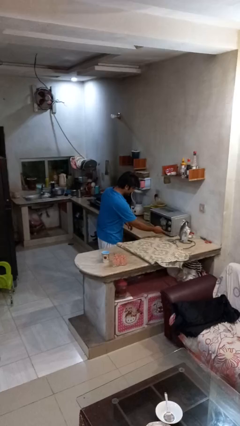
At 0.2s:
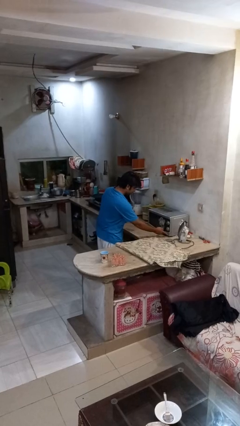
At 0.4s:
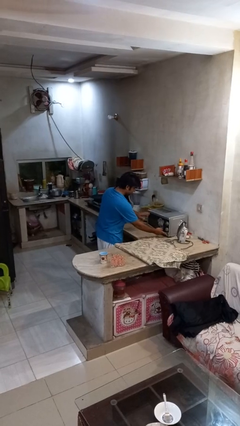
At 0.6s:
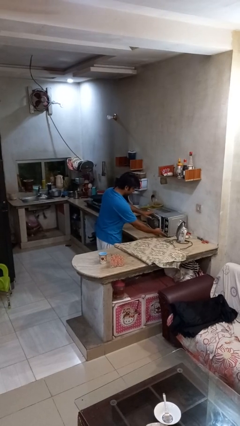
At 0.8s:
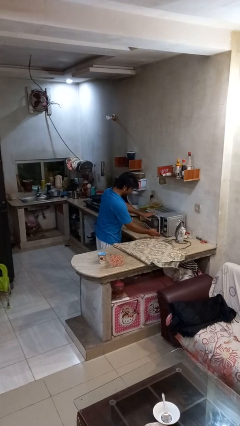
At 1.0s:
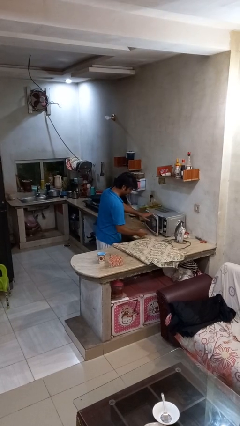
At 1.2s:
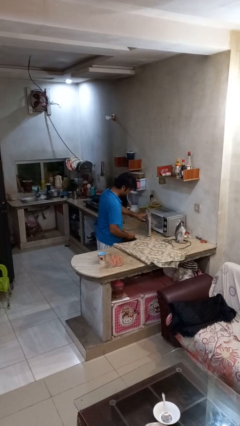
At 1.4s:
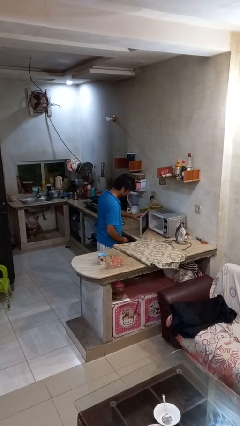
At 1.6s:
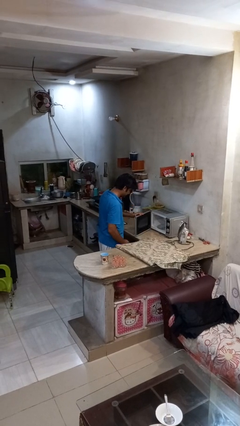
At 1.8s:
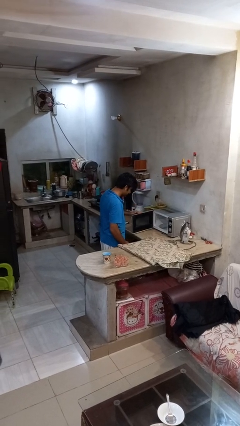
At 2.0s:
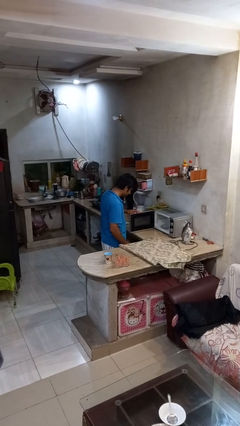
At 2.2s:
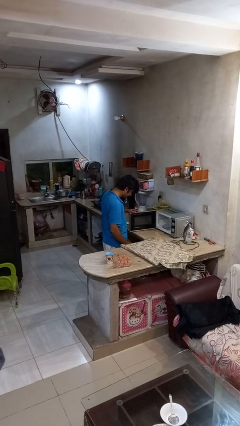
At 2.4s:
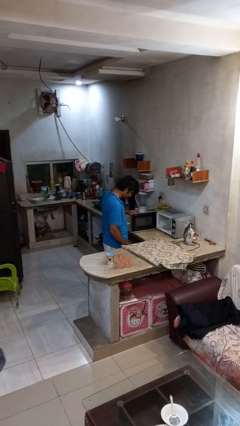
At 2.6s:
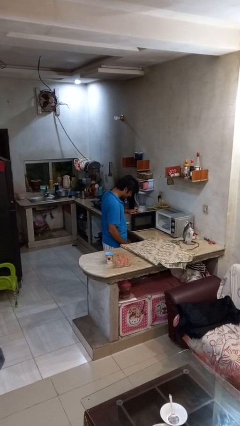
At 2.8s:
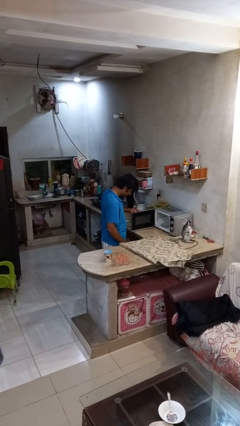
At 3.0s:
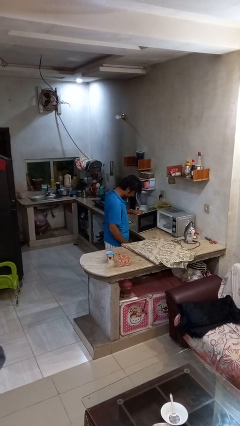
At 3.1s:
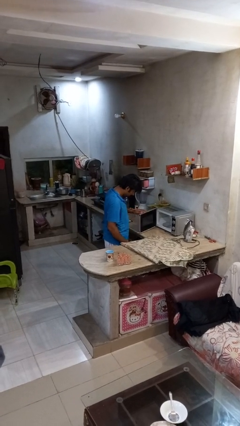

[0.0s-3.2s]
person opens microwave

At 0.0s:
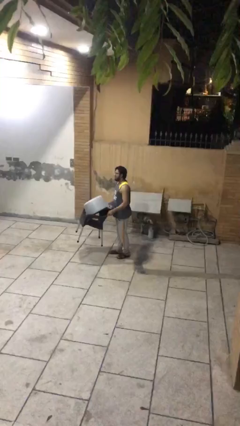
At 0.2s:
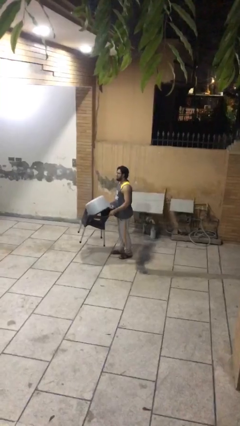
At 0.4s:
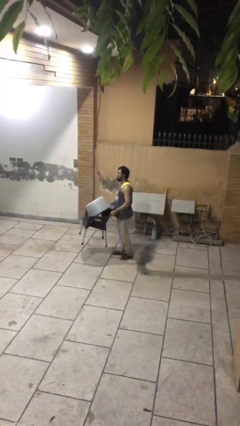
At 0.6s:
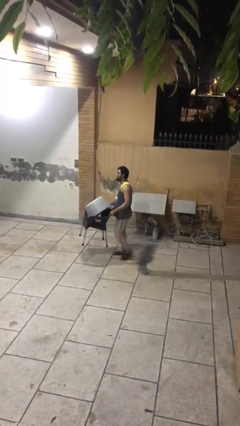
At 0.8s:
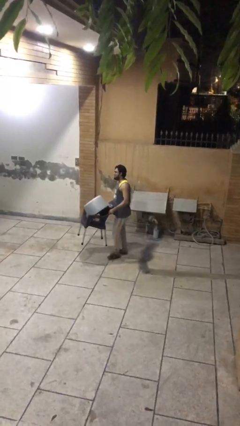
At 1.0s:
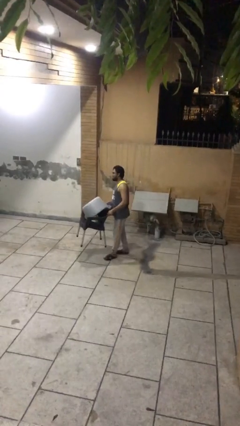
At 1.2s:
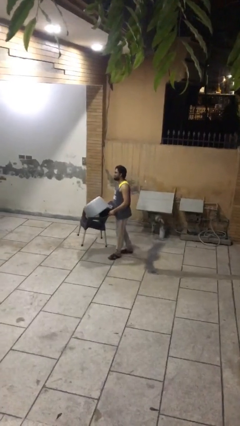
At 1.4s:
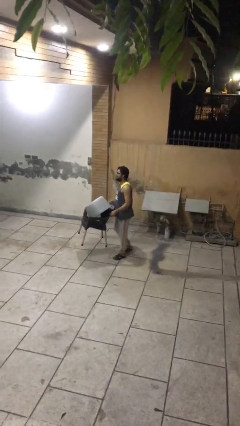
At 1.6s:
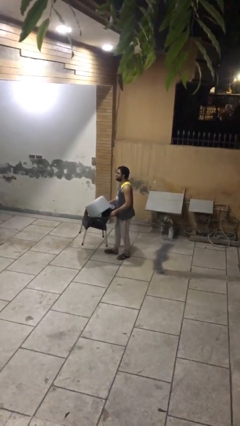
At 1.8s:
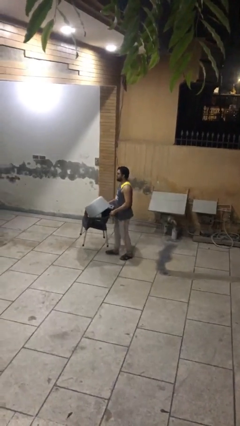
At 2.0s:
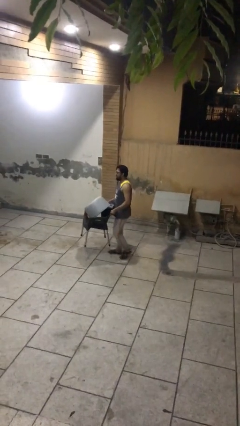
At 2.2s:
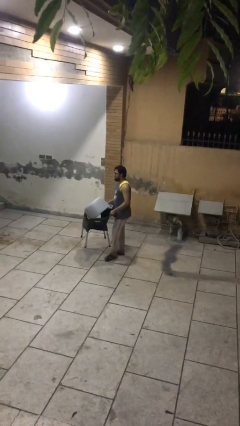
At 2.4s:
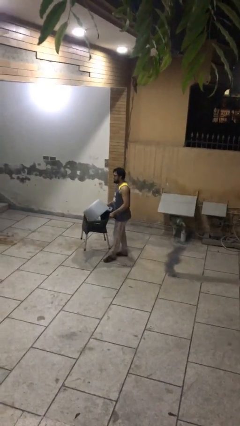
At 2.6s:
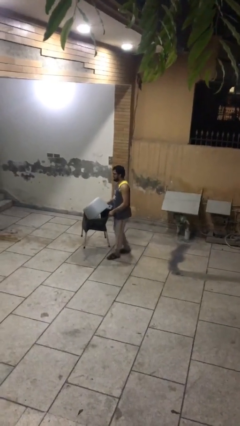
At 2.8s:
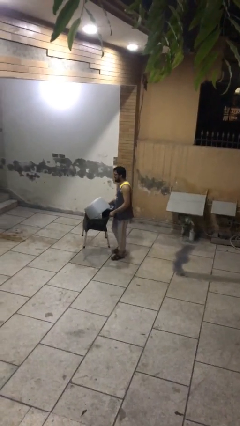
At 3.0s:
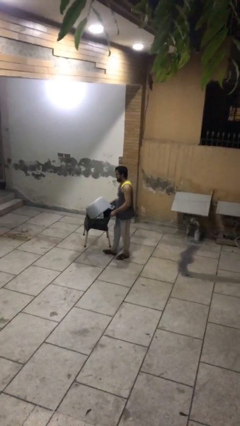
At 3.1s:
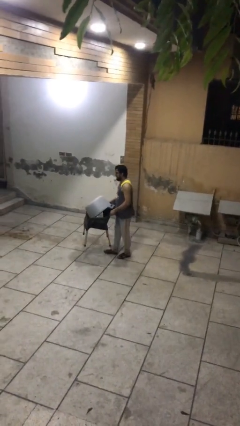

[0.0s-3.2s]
person carries heavy object

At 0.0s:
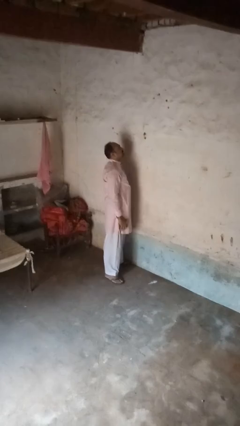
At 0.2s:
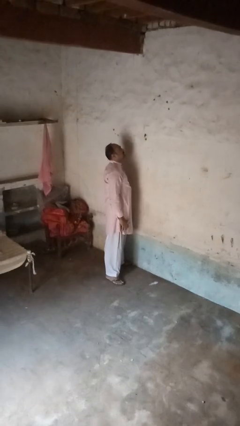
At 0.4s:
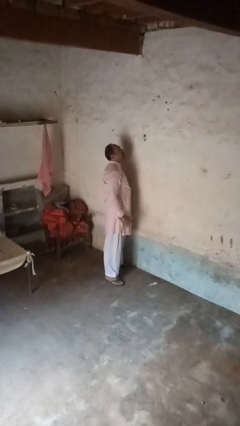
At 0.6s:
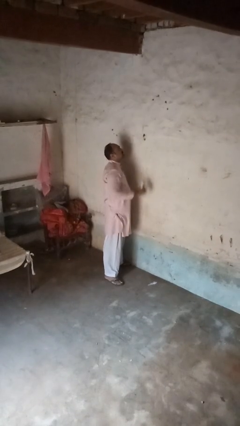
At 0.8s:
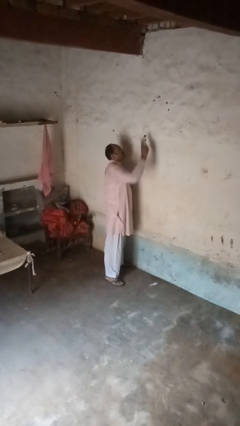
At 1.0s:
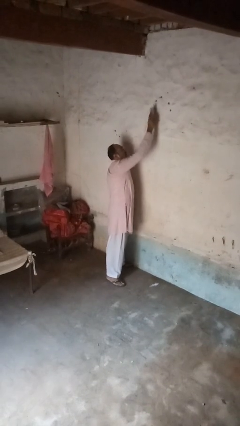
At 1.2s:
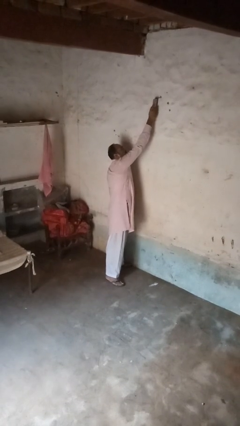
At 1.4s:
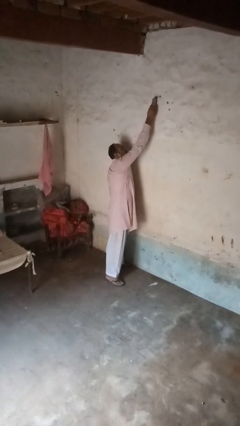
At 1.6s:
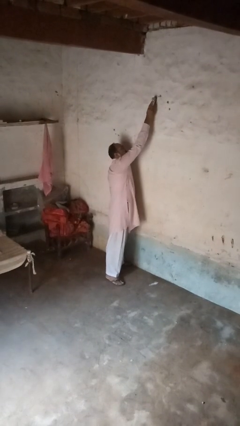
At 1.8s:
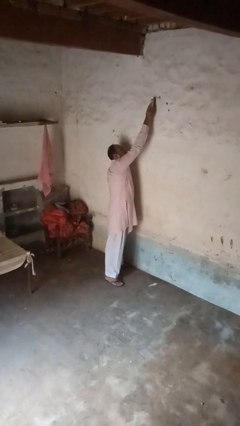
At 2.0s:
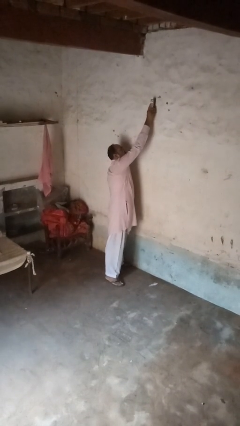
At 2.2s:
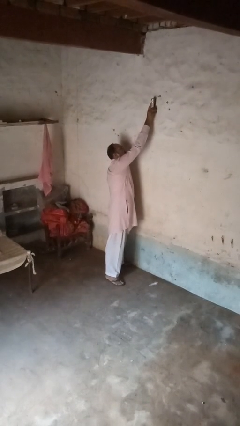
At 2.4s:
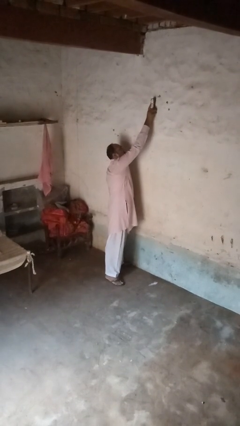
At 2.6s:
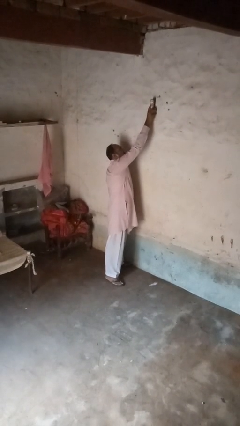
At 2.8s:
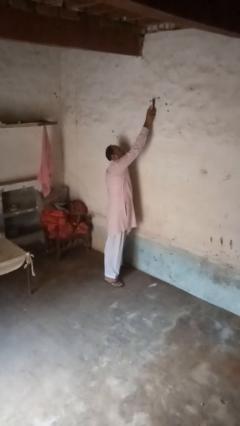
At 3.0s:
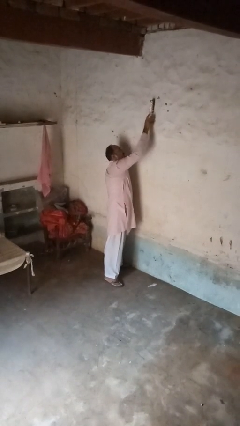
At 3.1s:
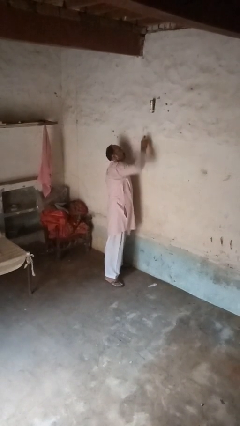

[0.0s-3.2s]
person adjusts thermostat

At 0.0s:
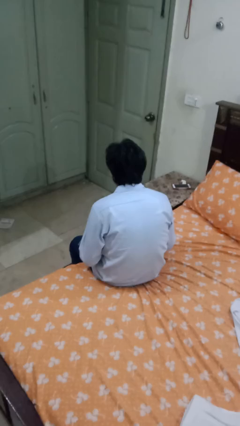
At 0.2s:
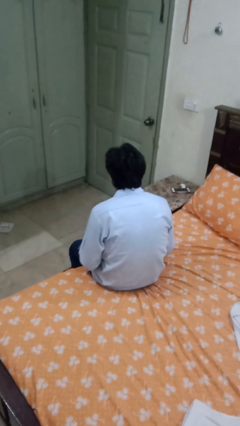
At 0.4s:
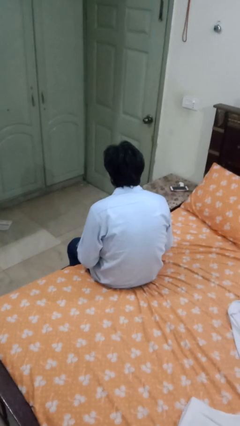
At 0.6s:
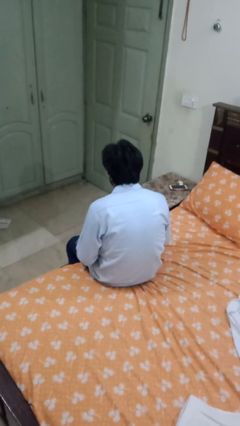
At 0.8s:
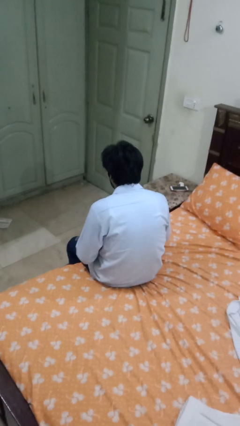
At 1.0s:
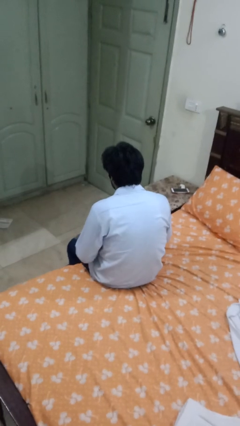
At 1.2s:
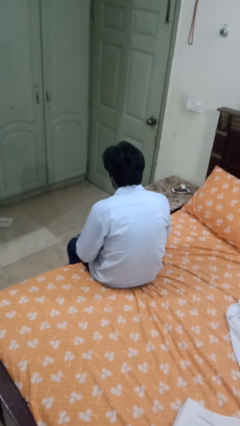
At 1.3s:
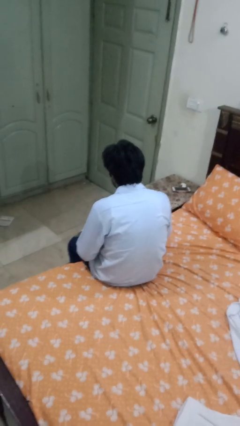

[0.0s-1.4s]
person stirs mug

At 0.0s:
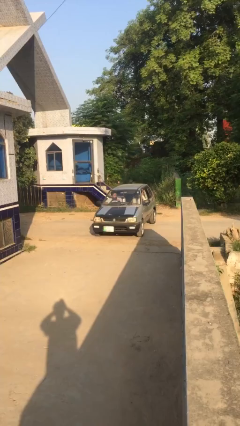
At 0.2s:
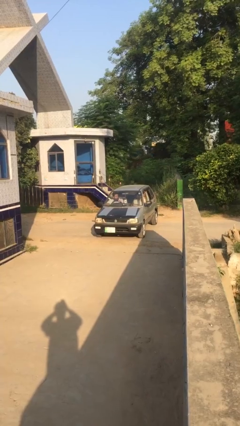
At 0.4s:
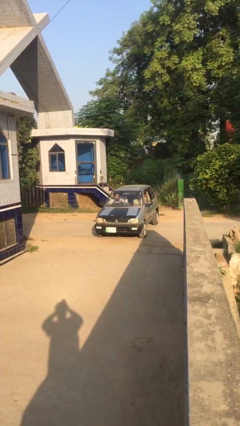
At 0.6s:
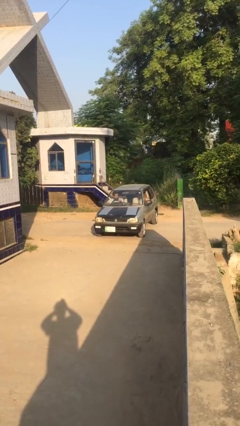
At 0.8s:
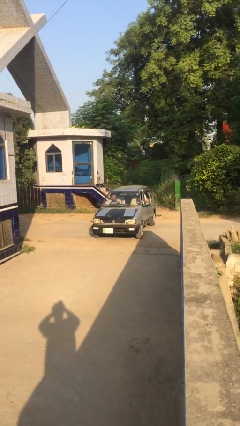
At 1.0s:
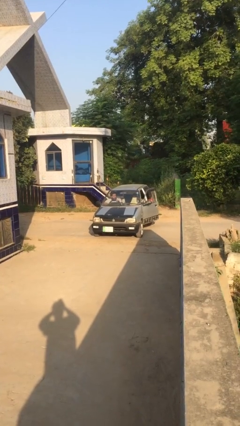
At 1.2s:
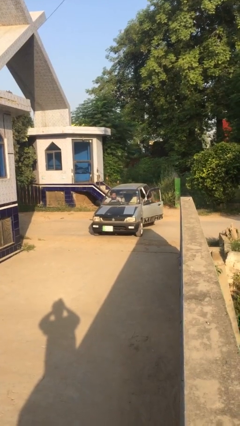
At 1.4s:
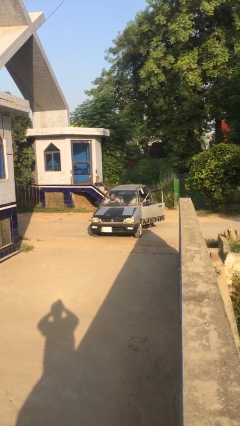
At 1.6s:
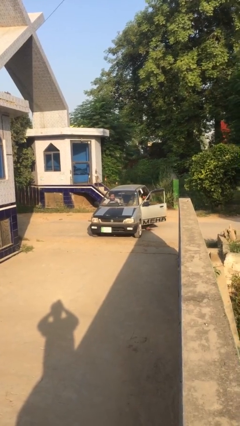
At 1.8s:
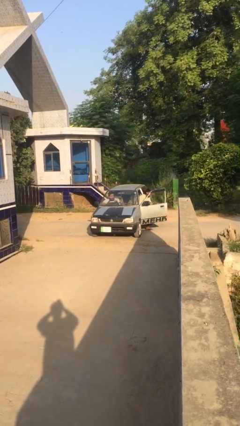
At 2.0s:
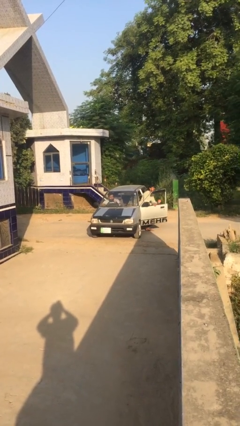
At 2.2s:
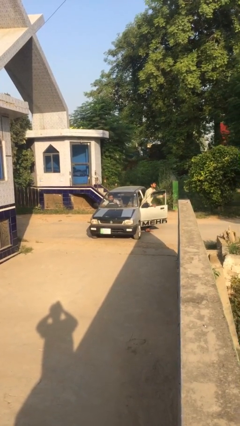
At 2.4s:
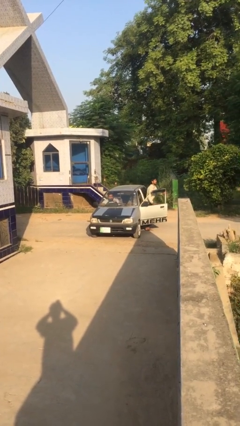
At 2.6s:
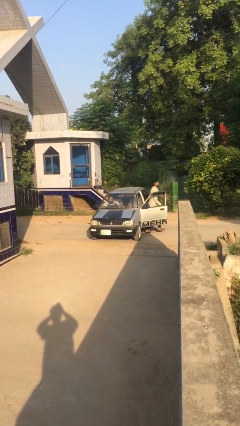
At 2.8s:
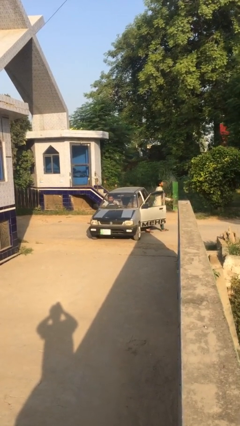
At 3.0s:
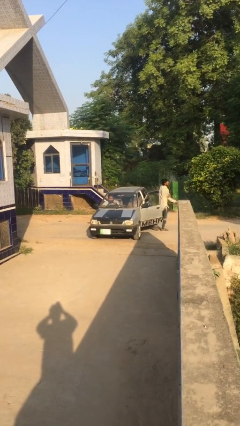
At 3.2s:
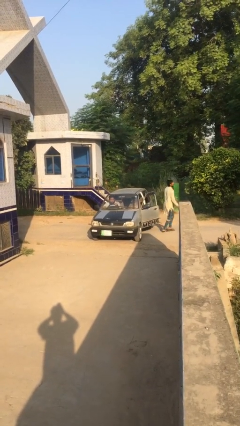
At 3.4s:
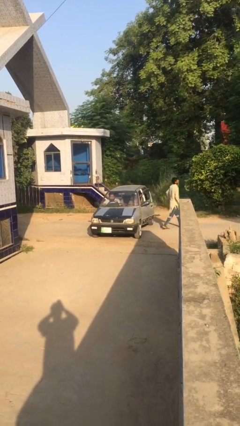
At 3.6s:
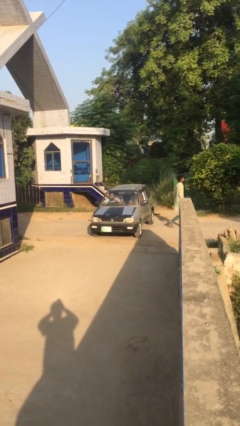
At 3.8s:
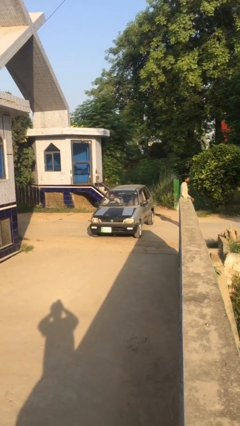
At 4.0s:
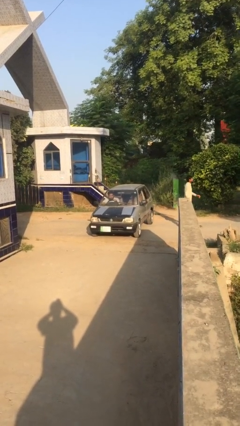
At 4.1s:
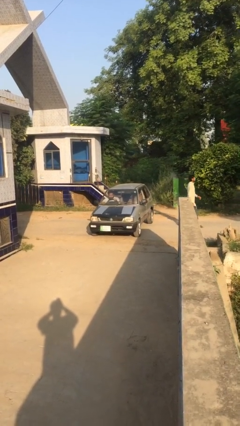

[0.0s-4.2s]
car drops off person

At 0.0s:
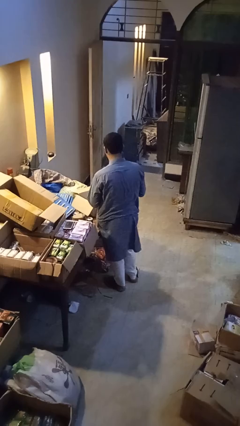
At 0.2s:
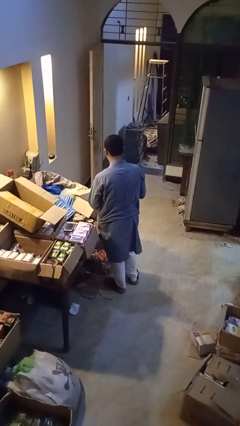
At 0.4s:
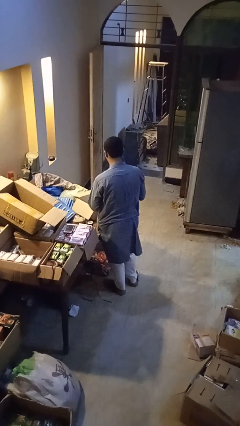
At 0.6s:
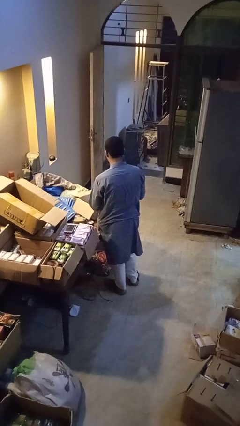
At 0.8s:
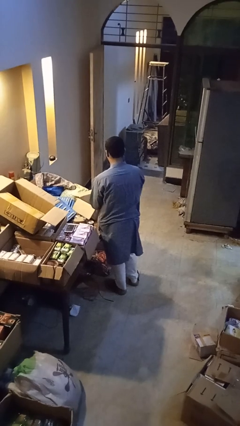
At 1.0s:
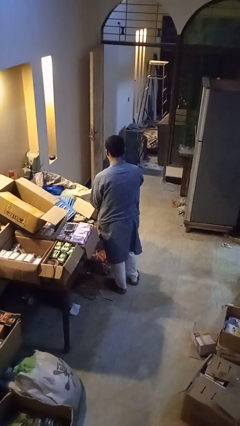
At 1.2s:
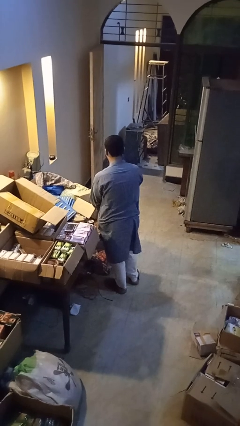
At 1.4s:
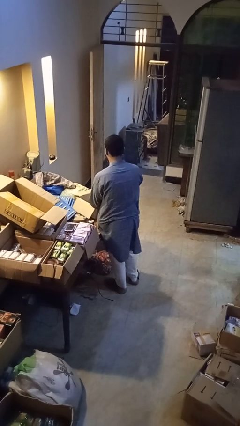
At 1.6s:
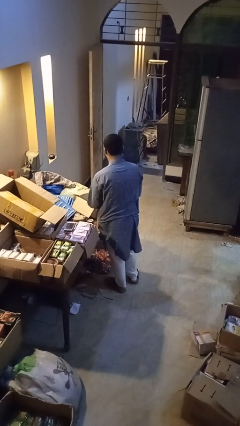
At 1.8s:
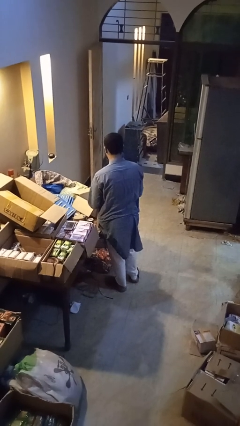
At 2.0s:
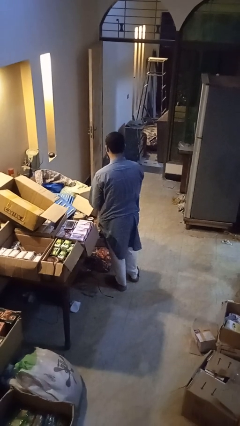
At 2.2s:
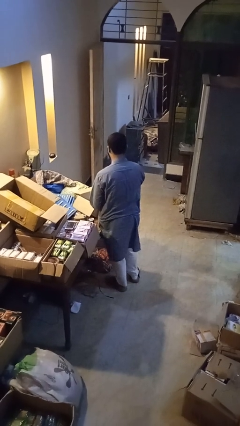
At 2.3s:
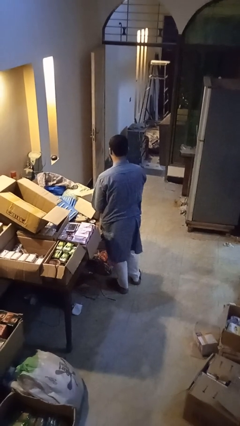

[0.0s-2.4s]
person puts object into box
